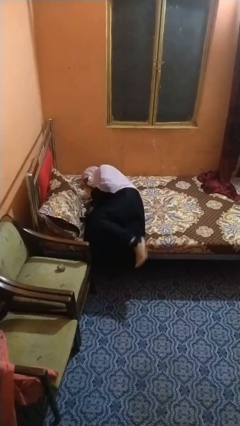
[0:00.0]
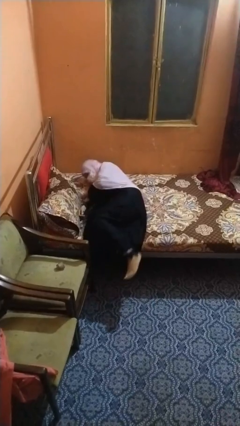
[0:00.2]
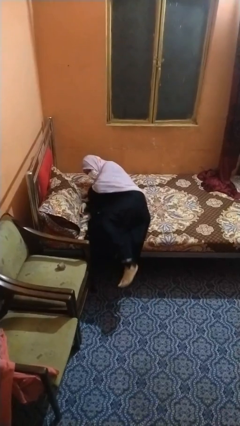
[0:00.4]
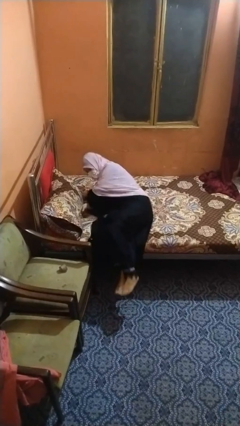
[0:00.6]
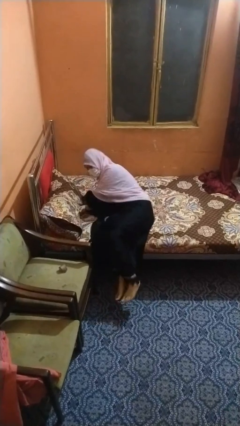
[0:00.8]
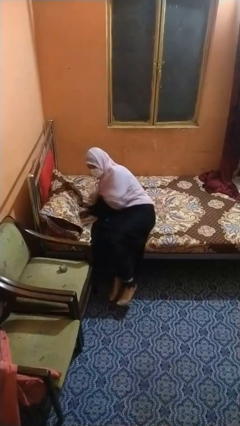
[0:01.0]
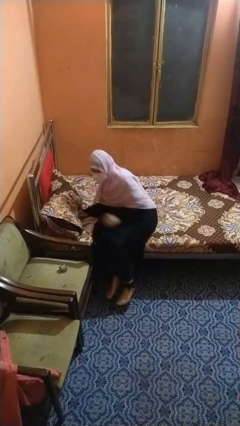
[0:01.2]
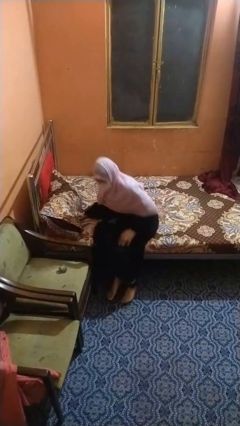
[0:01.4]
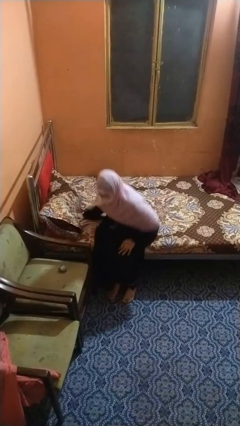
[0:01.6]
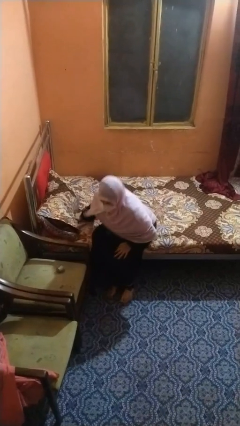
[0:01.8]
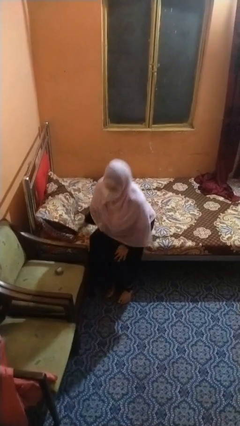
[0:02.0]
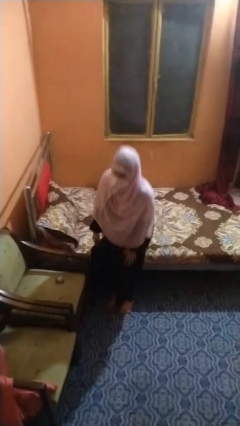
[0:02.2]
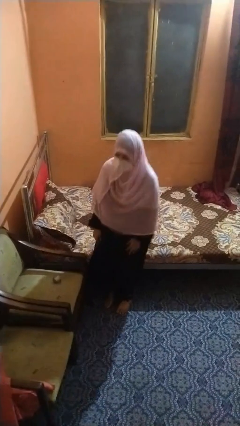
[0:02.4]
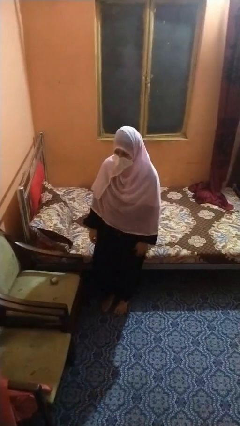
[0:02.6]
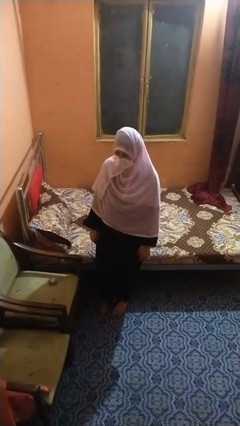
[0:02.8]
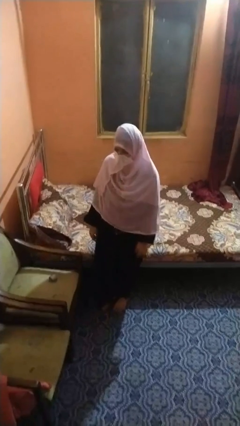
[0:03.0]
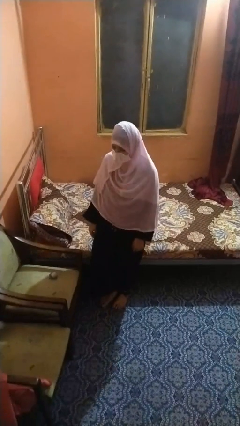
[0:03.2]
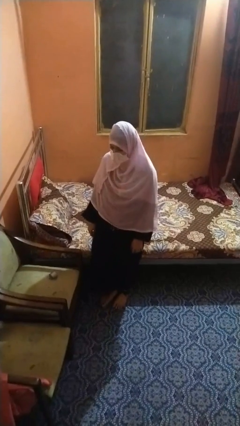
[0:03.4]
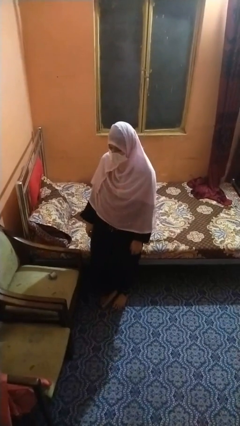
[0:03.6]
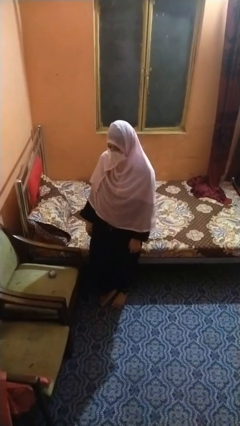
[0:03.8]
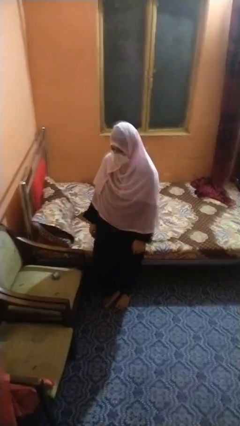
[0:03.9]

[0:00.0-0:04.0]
person stands up

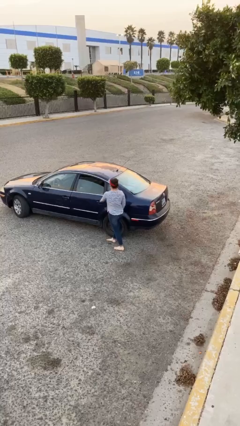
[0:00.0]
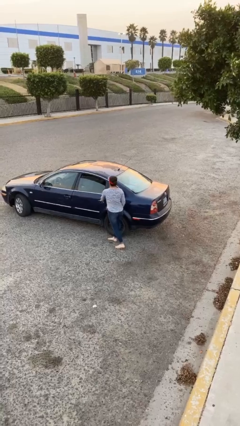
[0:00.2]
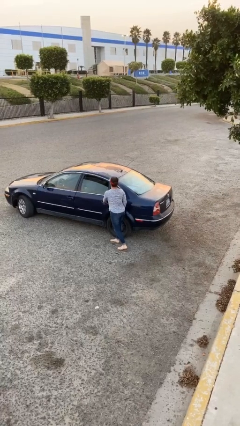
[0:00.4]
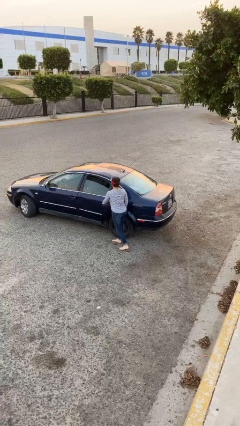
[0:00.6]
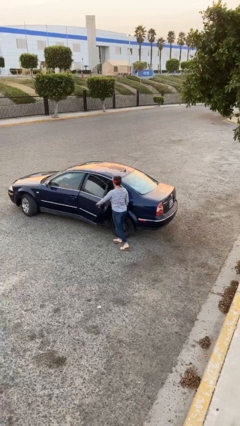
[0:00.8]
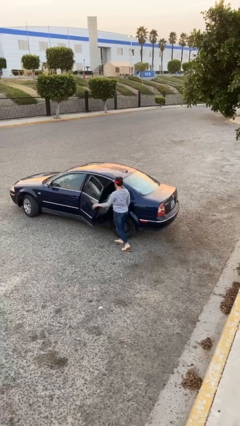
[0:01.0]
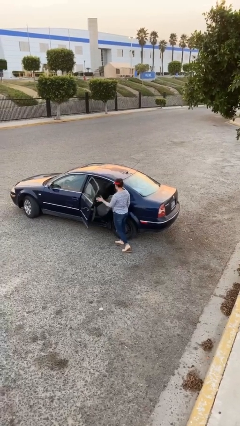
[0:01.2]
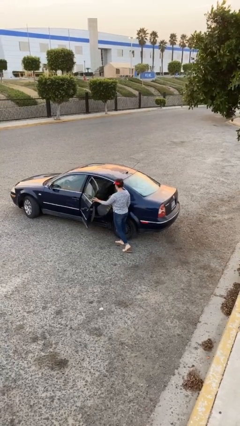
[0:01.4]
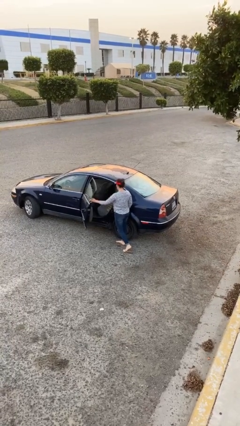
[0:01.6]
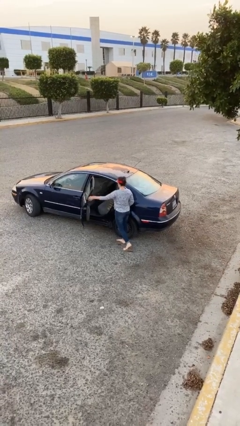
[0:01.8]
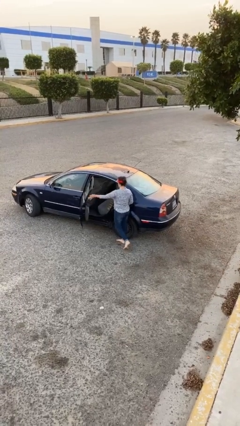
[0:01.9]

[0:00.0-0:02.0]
person opens car door

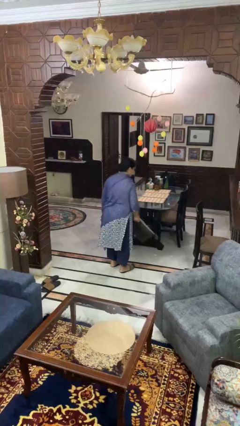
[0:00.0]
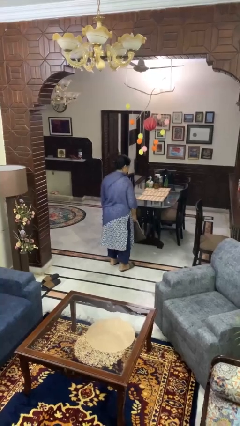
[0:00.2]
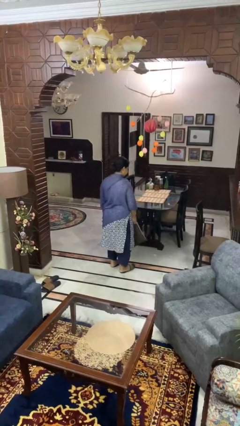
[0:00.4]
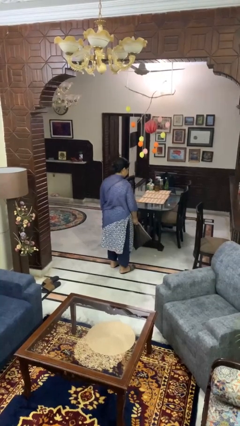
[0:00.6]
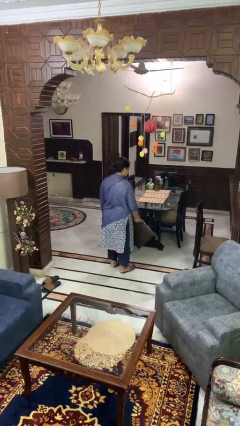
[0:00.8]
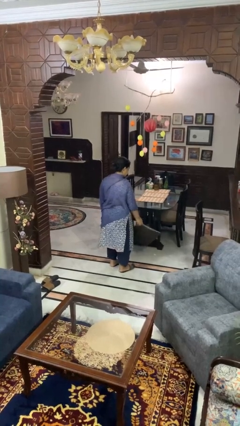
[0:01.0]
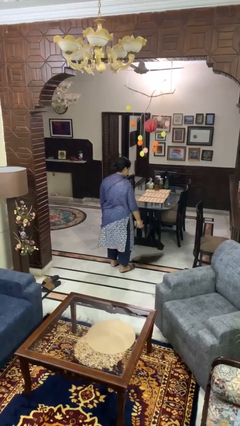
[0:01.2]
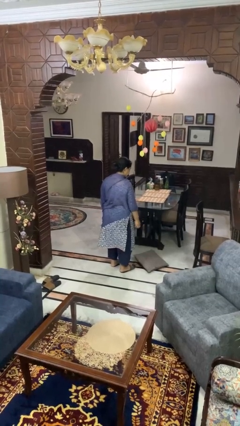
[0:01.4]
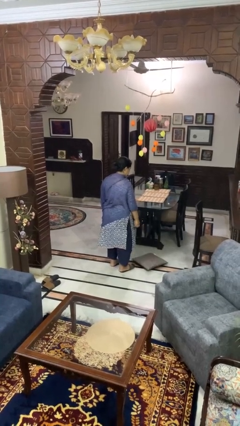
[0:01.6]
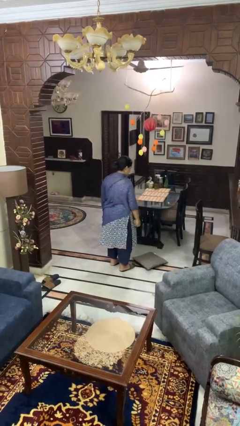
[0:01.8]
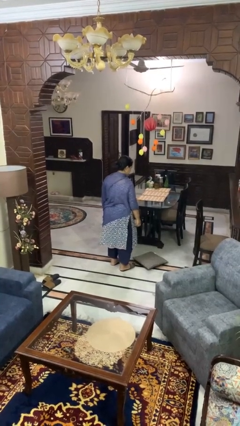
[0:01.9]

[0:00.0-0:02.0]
person throws object to ground

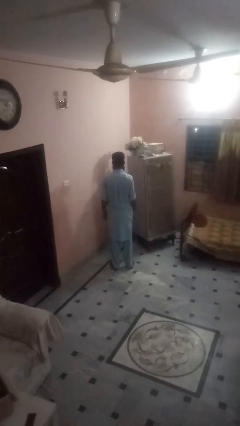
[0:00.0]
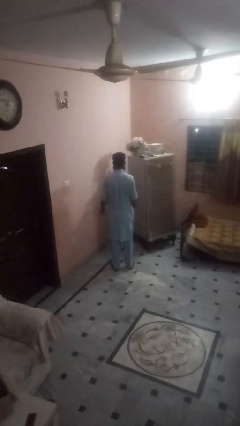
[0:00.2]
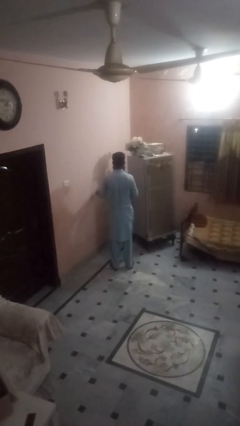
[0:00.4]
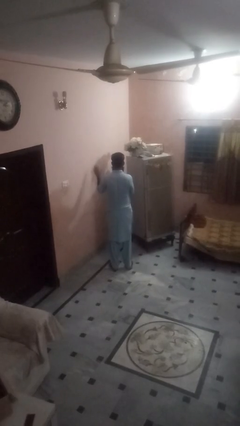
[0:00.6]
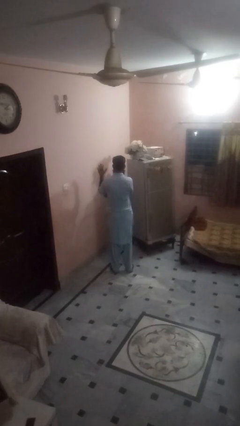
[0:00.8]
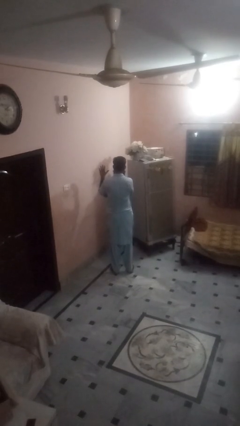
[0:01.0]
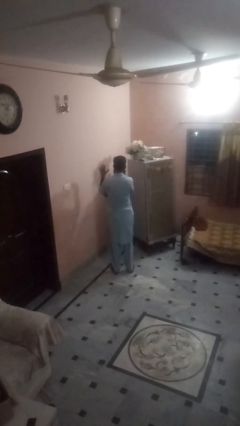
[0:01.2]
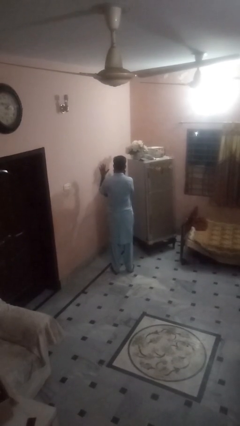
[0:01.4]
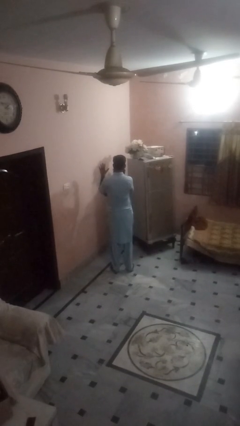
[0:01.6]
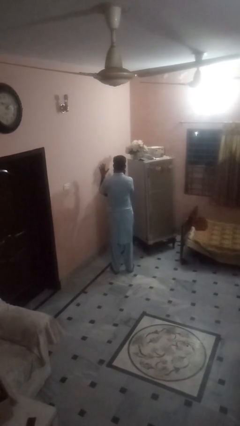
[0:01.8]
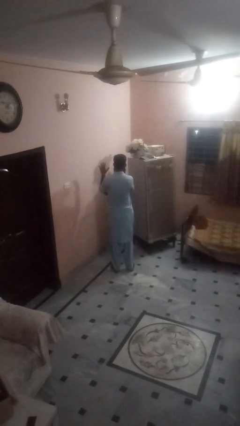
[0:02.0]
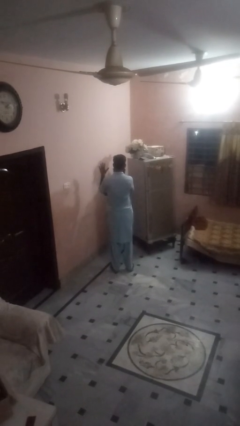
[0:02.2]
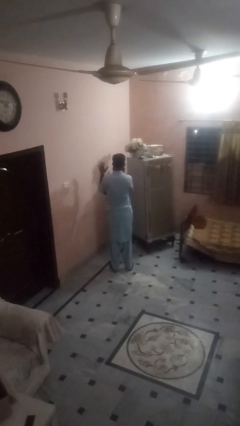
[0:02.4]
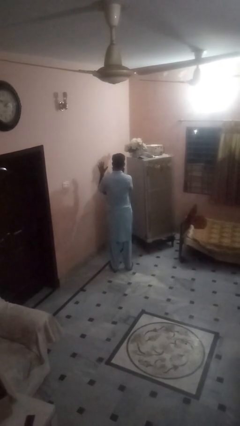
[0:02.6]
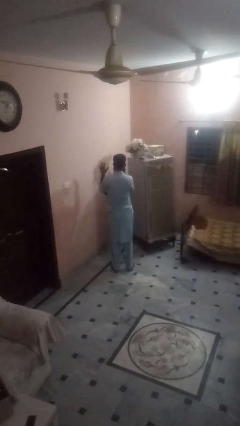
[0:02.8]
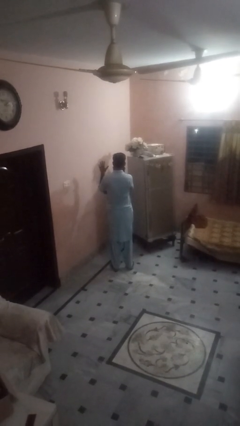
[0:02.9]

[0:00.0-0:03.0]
person gestures number five

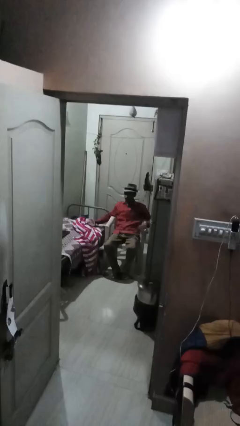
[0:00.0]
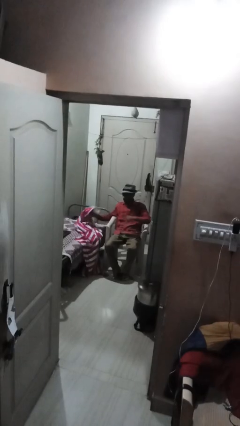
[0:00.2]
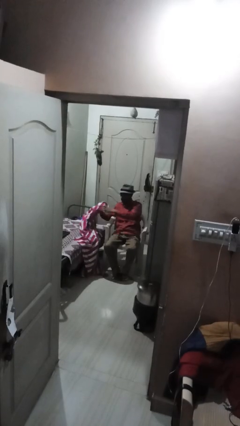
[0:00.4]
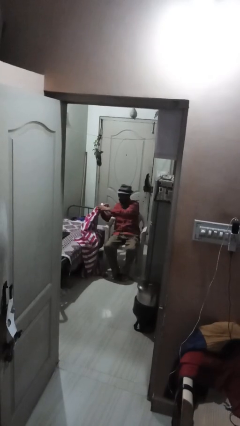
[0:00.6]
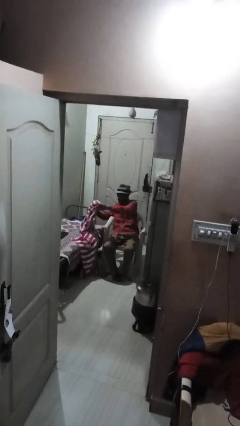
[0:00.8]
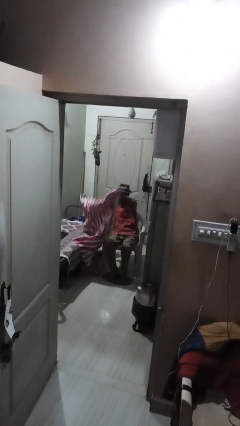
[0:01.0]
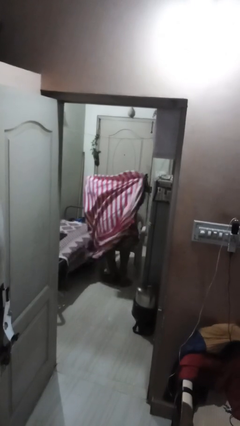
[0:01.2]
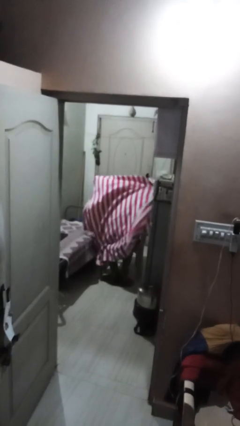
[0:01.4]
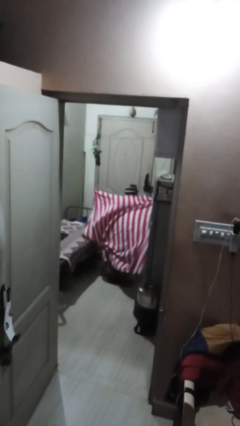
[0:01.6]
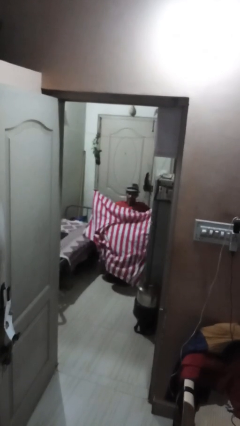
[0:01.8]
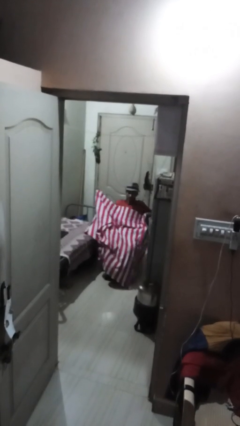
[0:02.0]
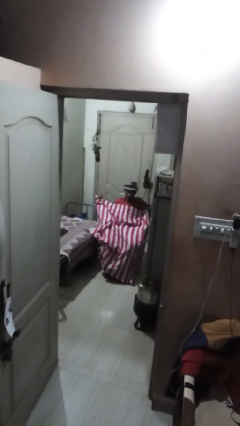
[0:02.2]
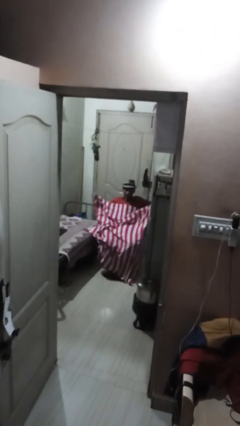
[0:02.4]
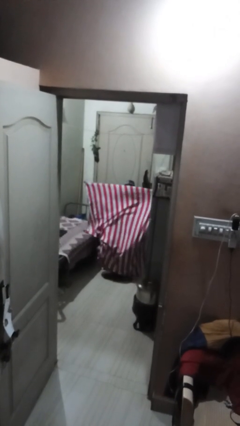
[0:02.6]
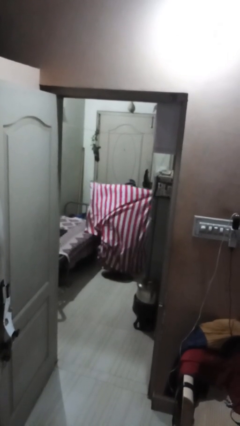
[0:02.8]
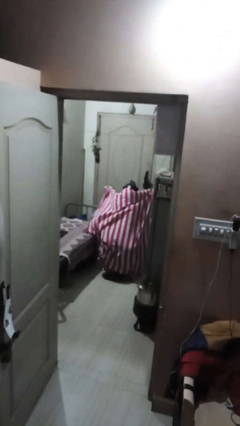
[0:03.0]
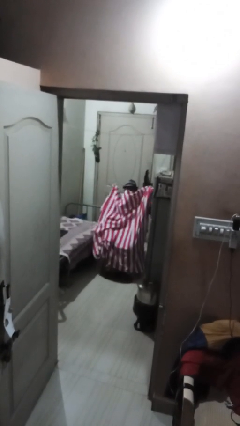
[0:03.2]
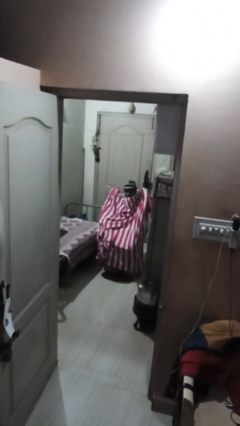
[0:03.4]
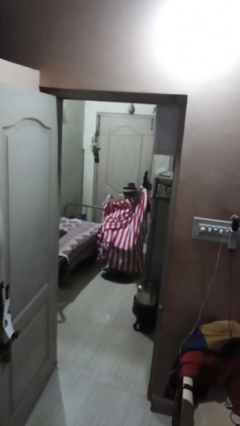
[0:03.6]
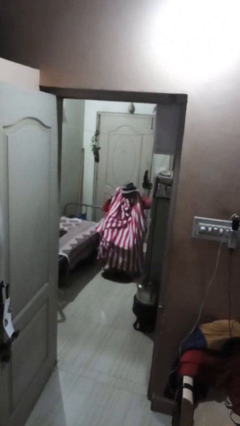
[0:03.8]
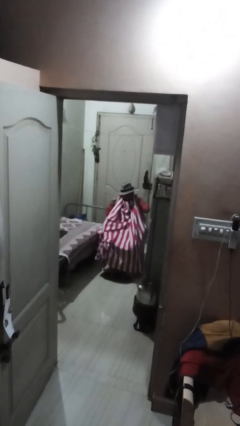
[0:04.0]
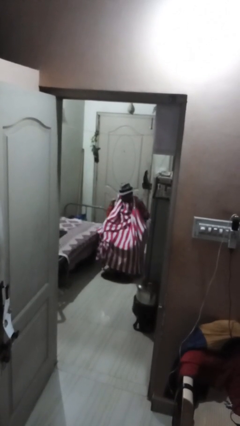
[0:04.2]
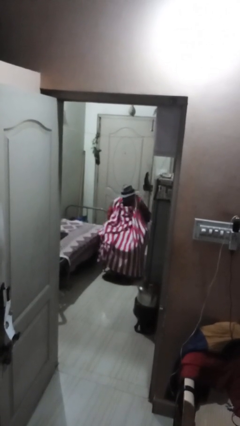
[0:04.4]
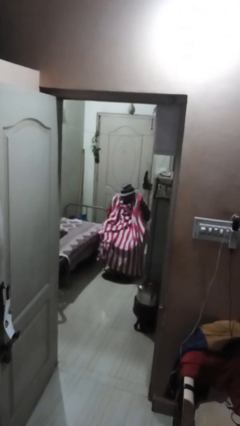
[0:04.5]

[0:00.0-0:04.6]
person covers with blanket

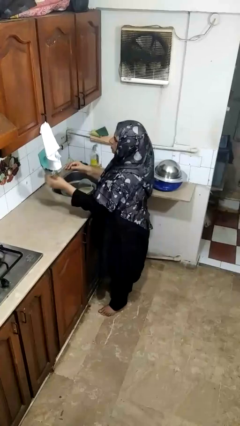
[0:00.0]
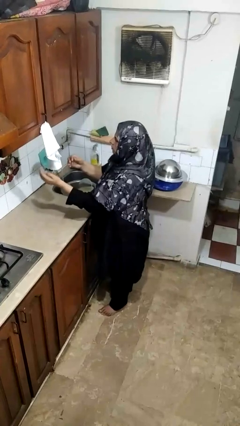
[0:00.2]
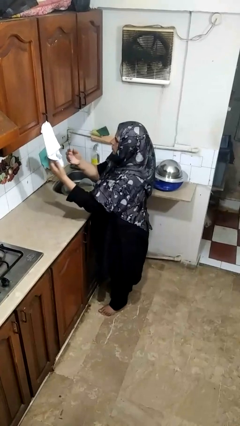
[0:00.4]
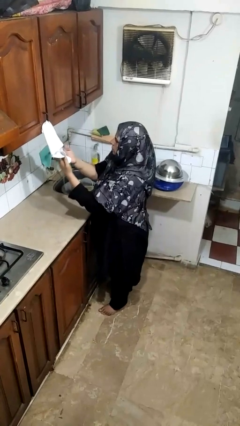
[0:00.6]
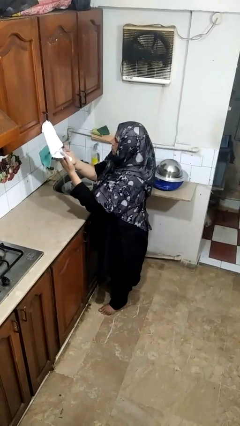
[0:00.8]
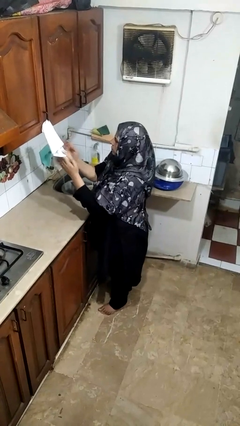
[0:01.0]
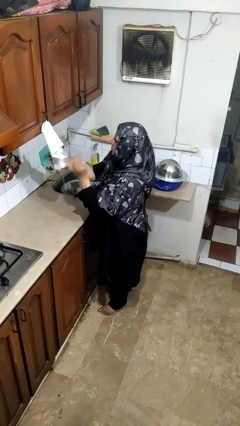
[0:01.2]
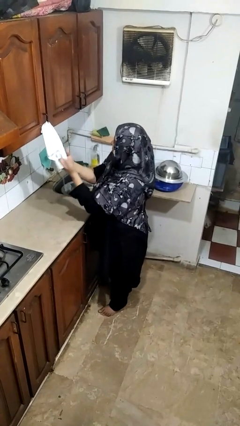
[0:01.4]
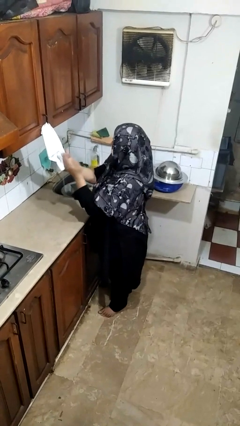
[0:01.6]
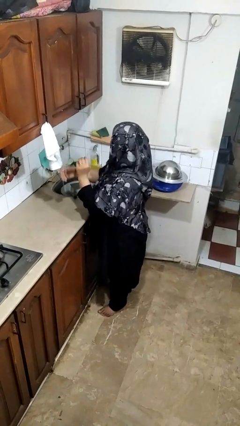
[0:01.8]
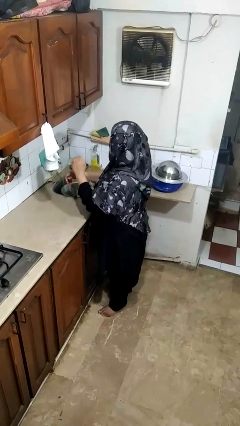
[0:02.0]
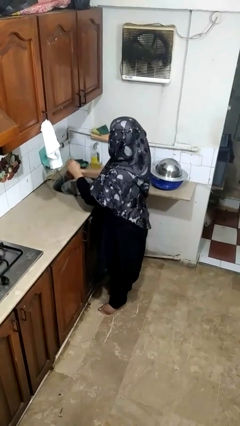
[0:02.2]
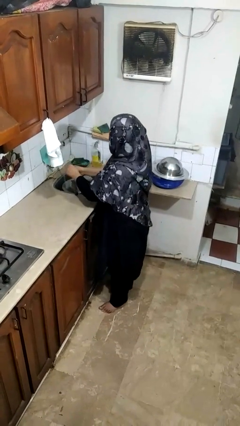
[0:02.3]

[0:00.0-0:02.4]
person dries hands with towel
